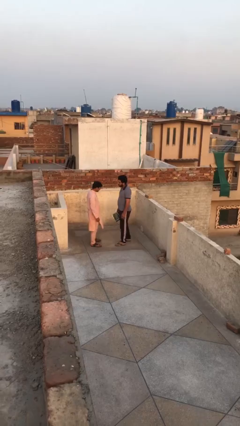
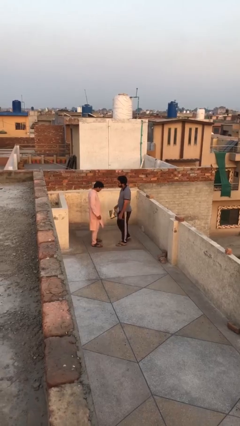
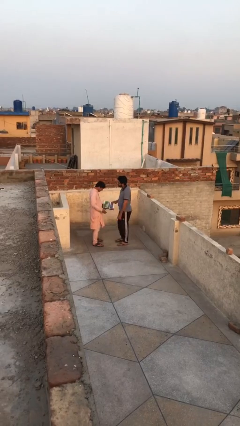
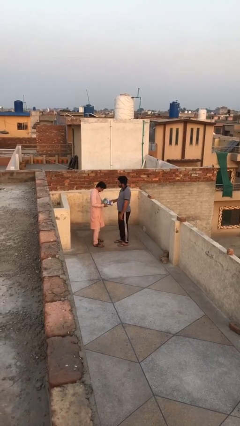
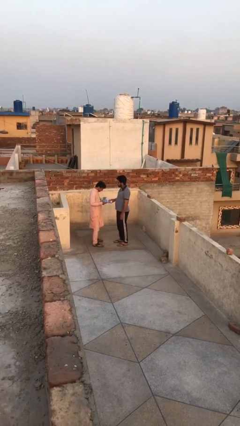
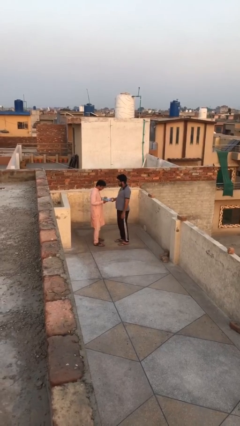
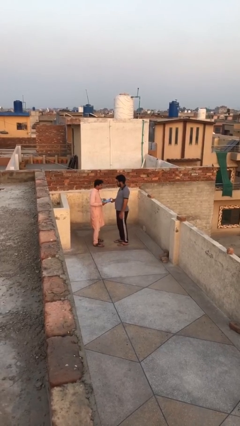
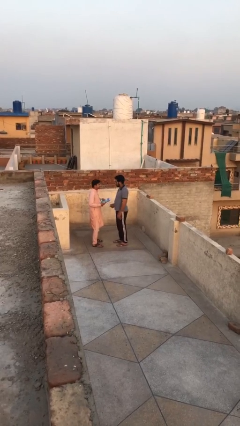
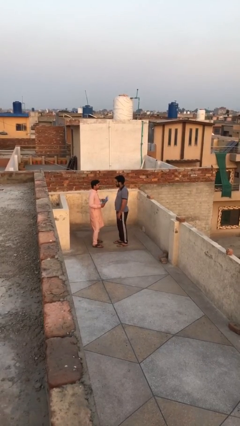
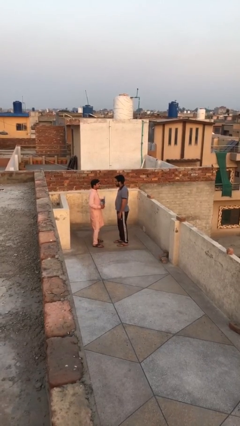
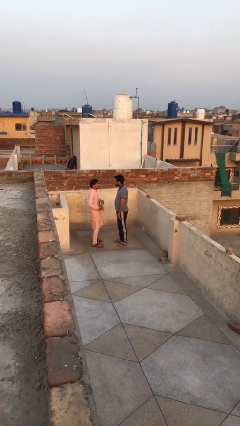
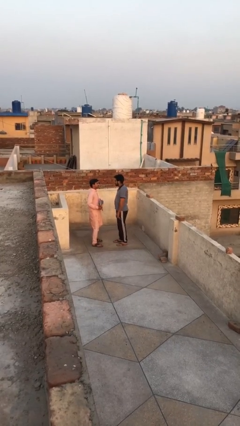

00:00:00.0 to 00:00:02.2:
person transfers object to person

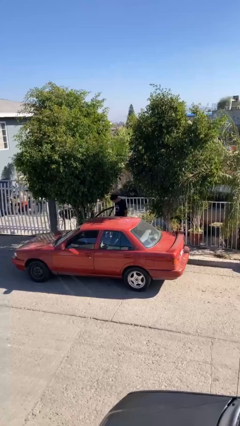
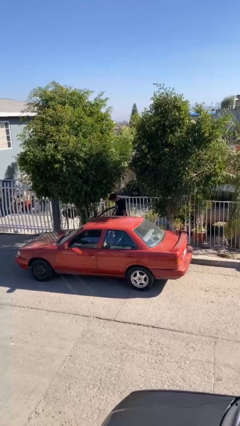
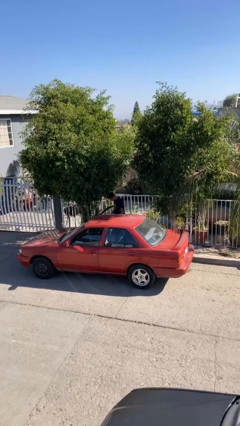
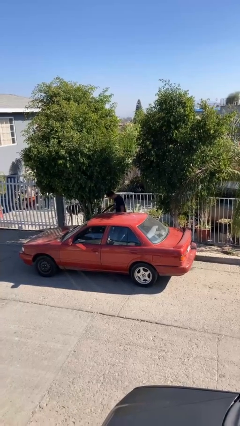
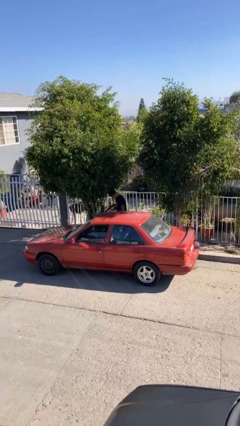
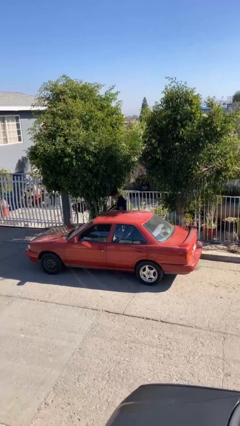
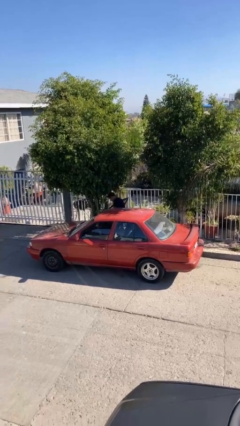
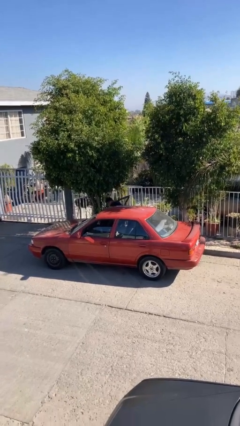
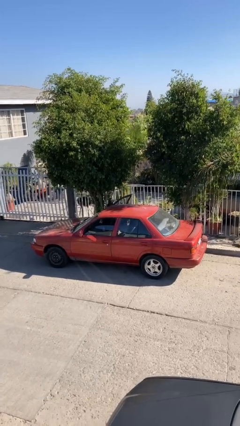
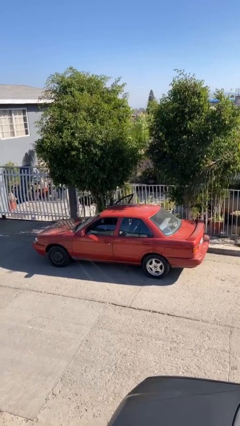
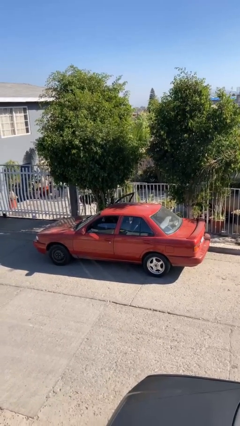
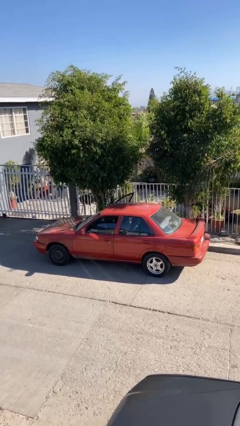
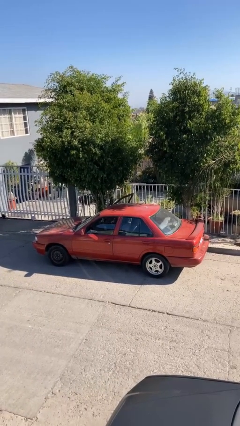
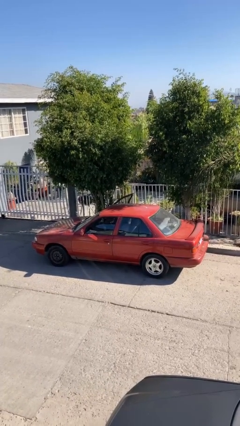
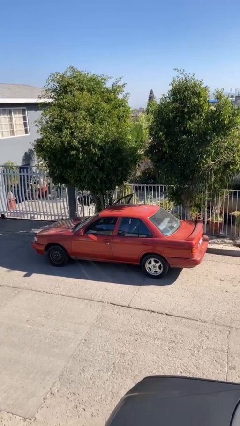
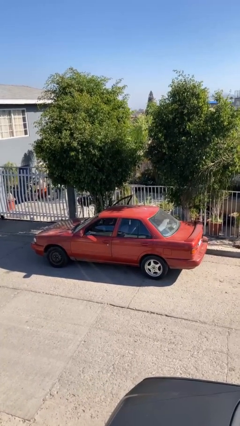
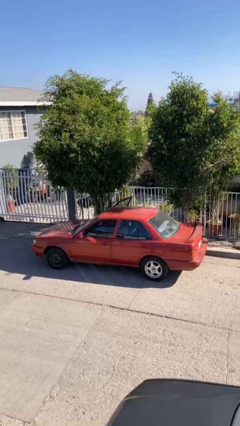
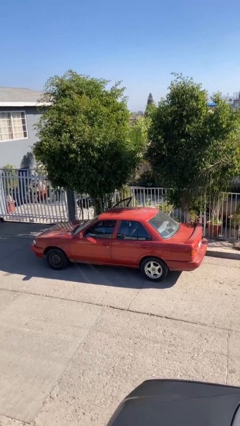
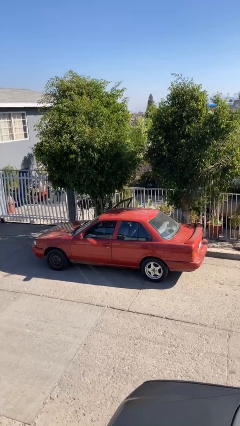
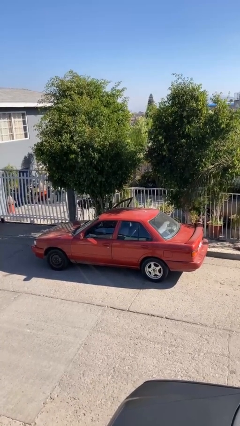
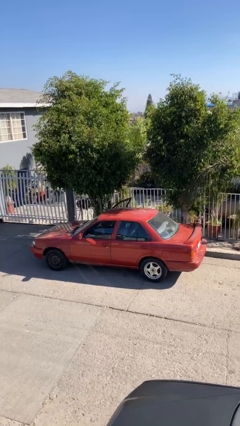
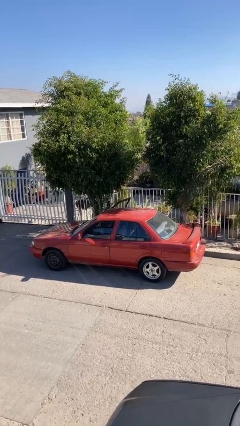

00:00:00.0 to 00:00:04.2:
person enters car

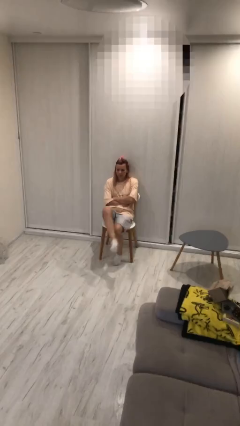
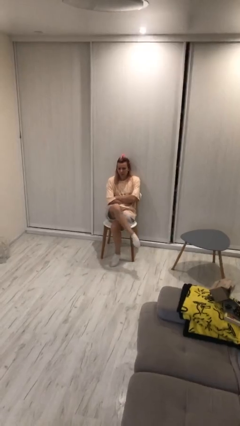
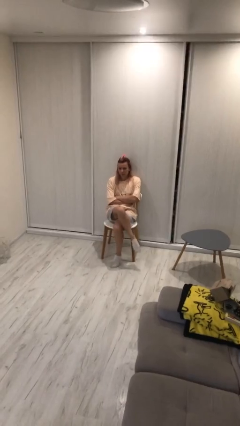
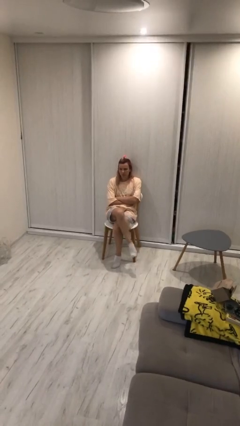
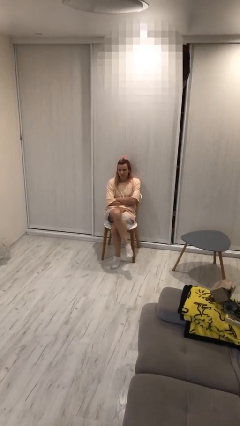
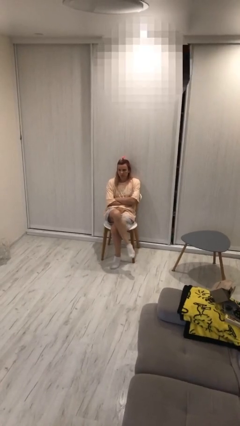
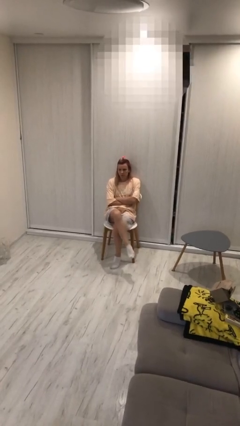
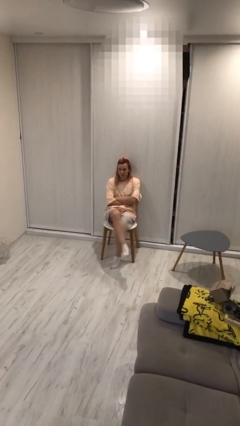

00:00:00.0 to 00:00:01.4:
person crosses legs

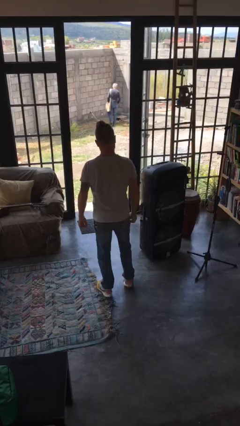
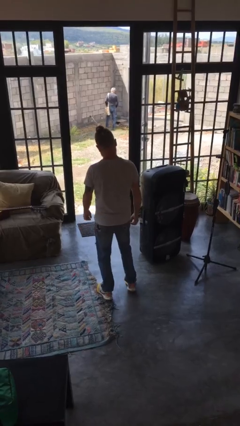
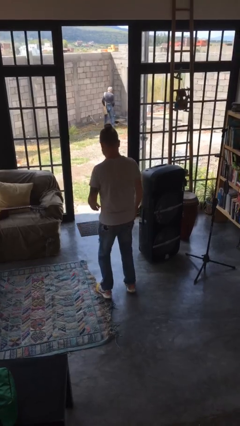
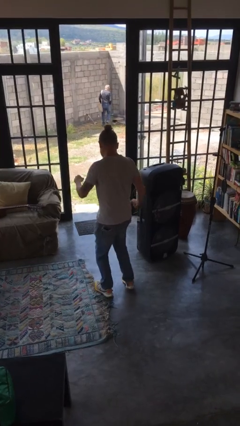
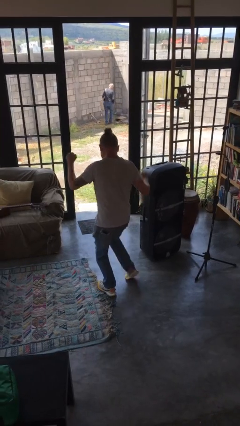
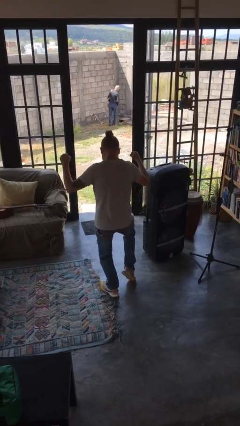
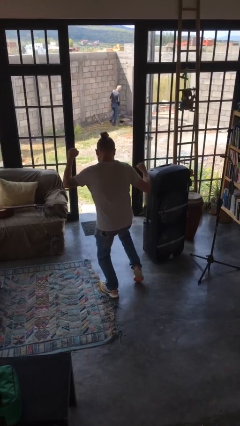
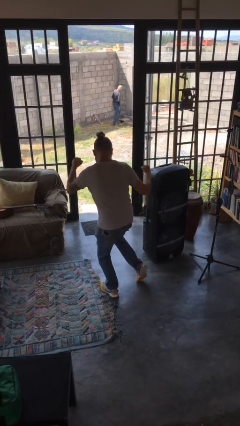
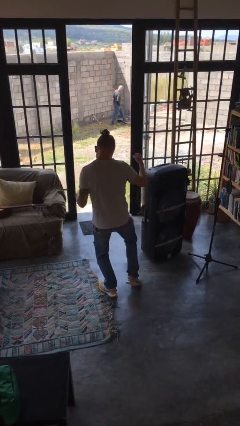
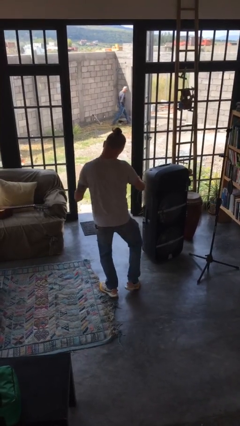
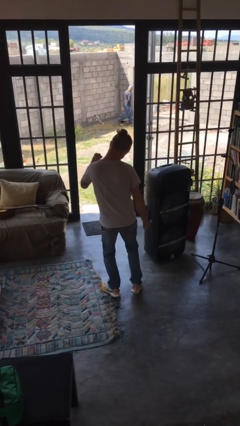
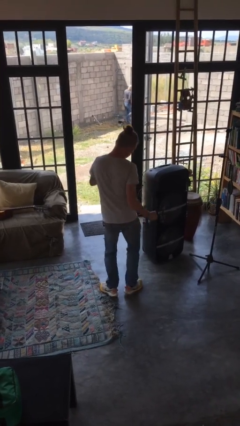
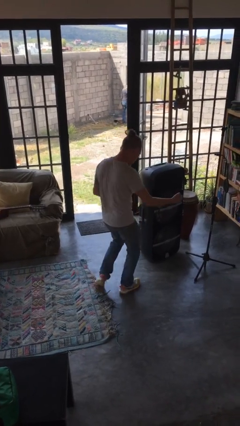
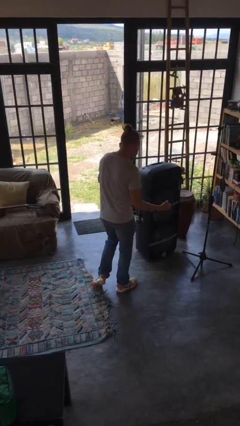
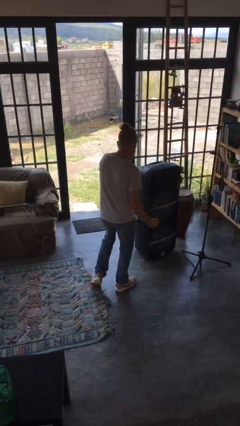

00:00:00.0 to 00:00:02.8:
person dances in place

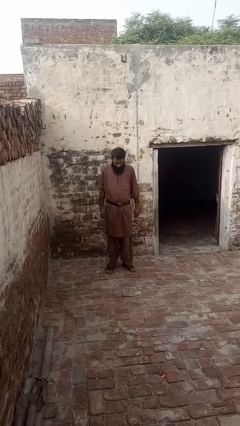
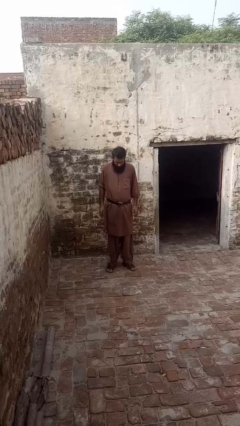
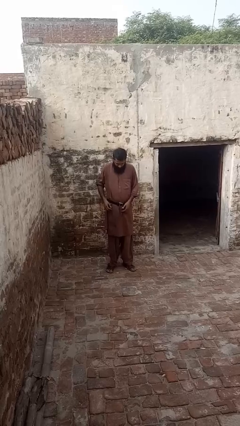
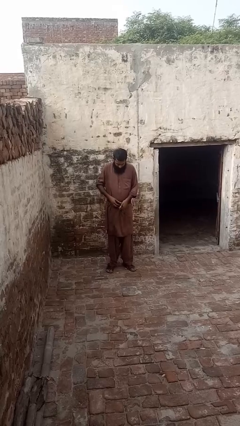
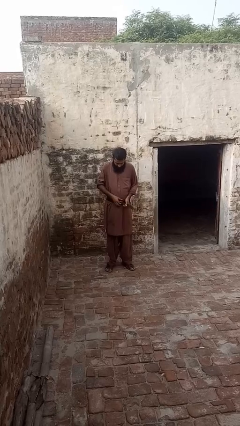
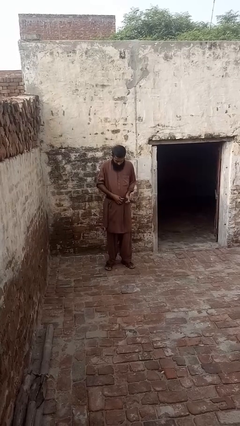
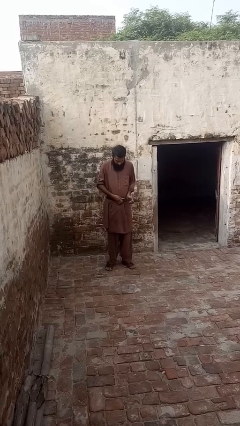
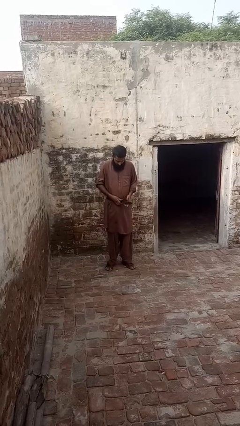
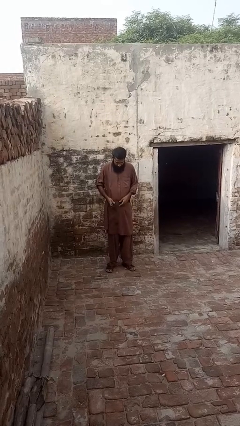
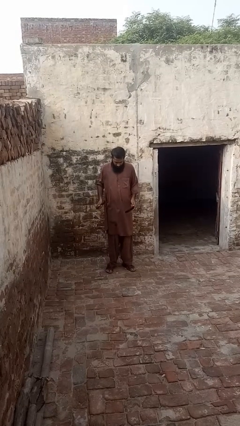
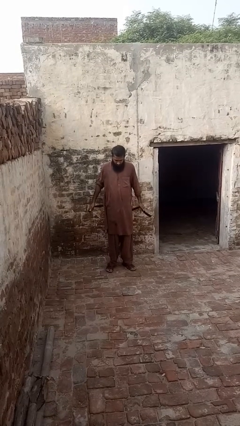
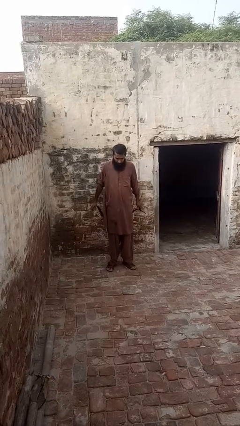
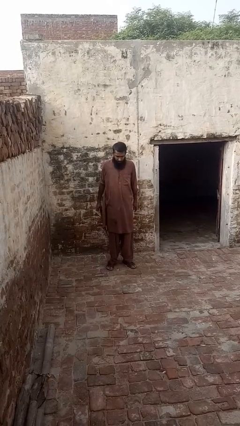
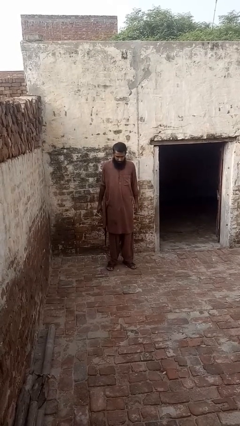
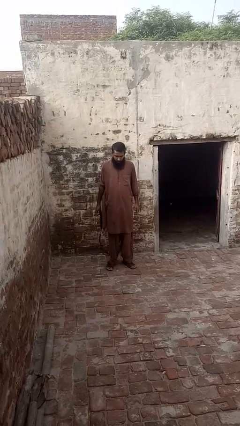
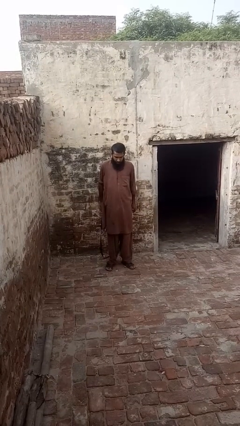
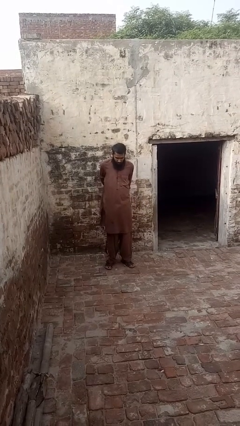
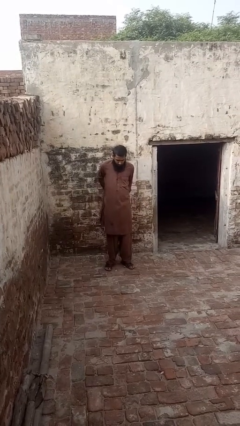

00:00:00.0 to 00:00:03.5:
person takes off belt

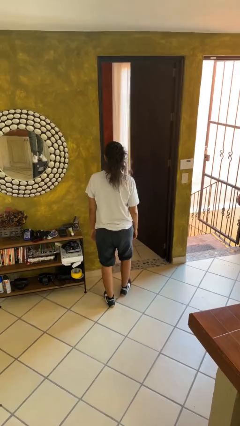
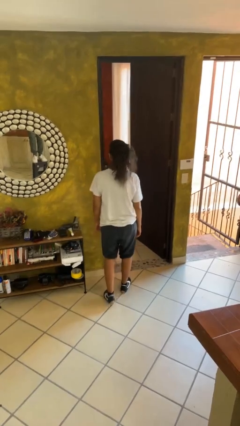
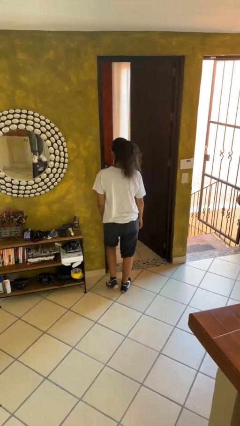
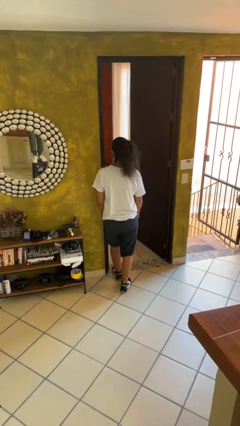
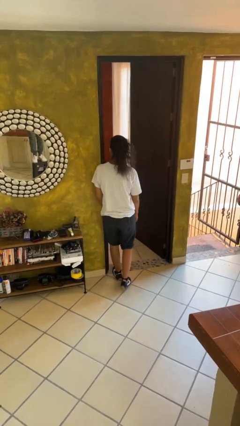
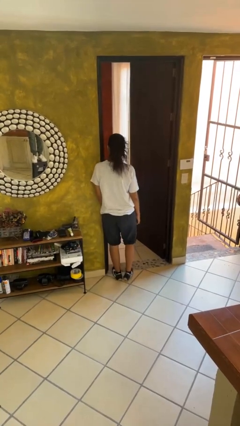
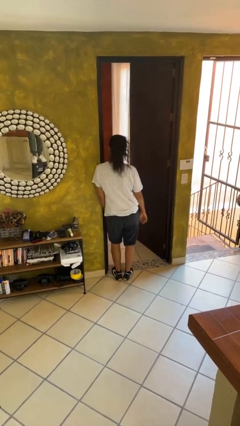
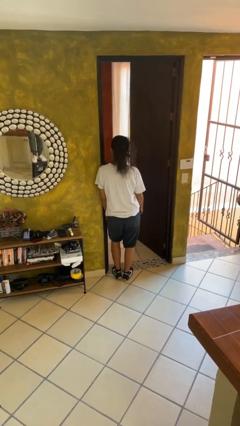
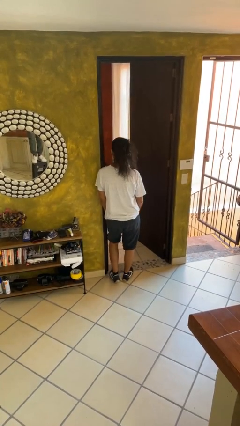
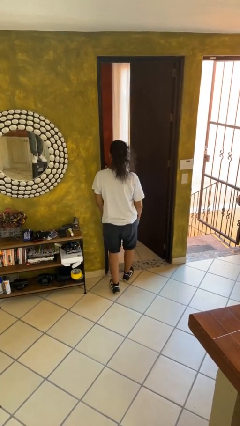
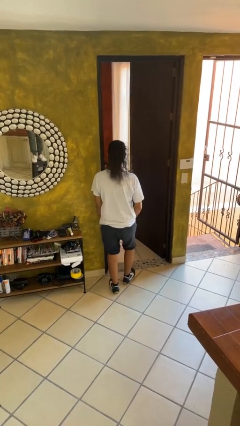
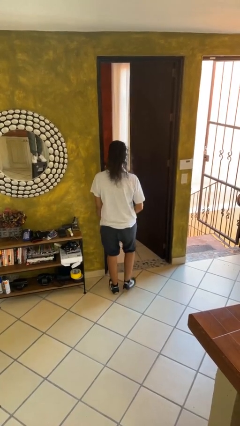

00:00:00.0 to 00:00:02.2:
person bumps into wall

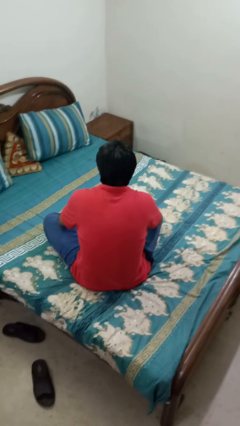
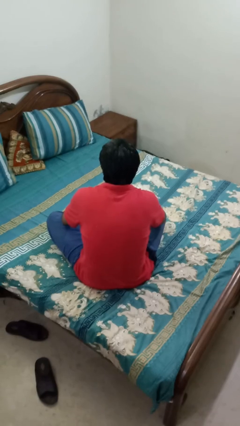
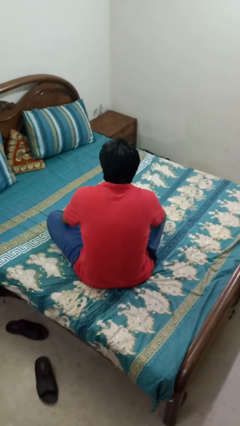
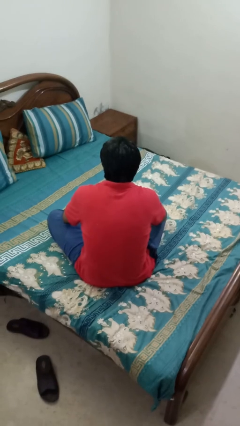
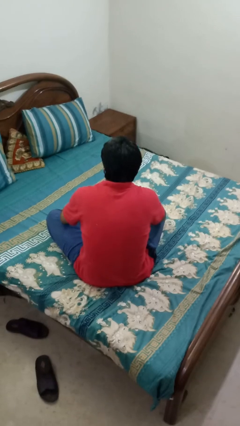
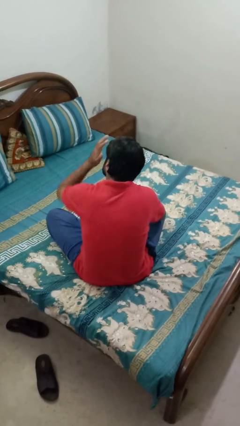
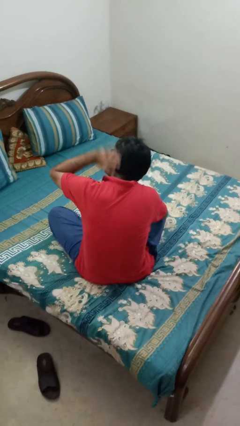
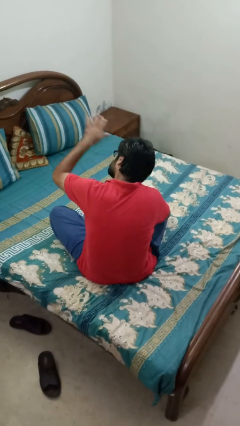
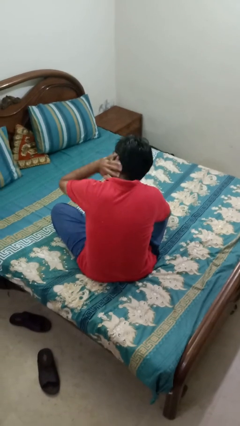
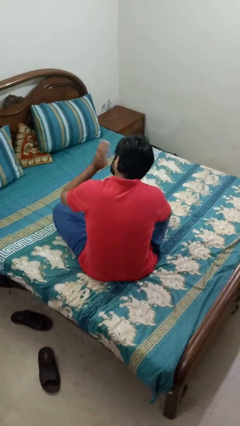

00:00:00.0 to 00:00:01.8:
person swats bug
